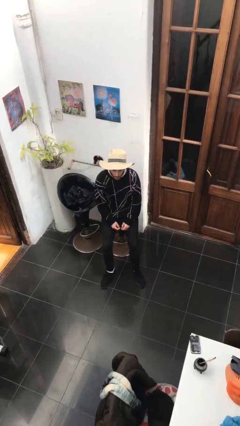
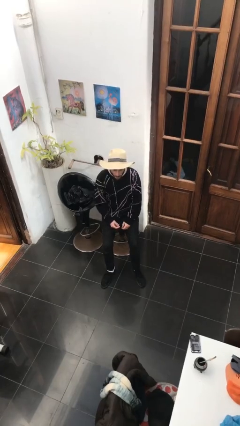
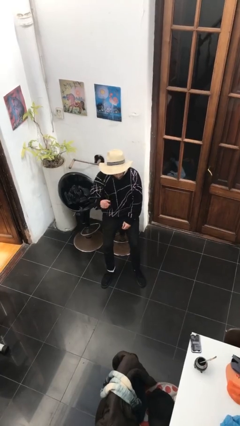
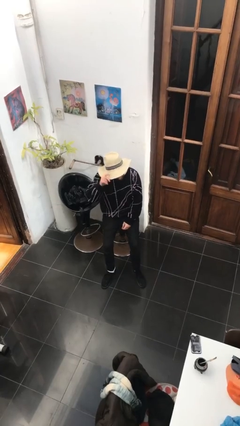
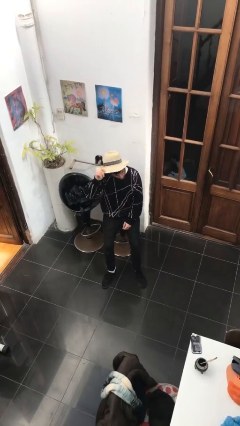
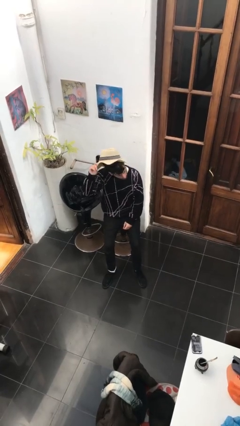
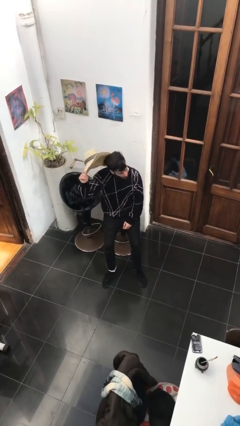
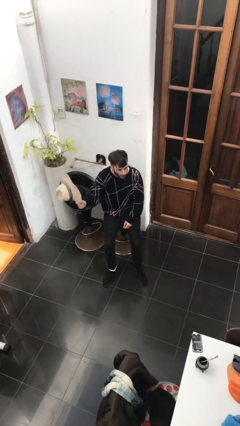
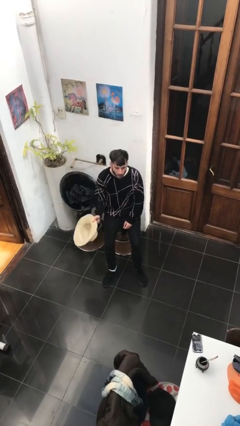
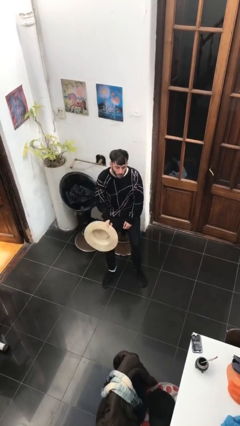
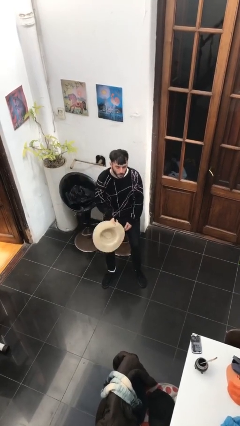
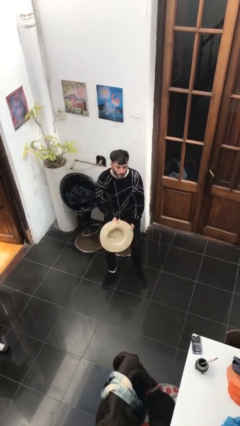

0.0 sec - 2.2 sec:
person takes off hat

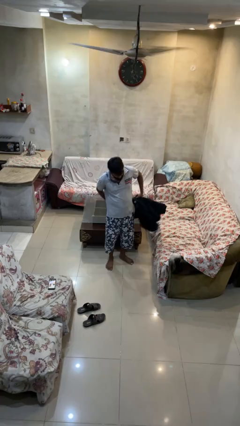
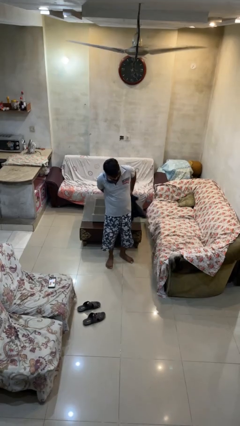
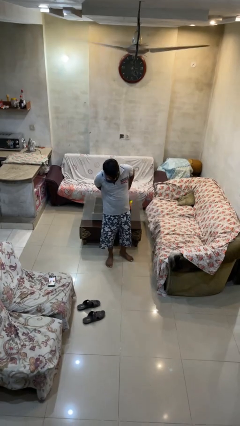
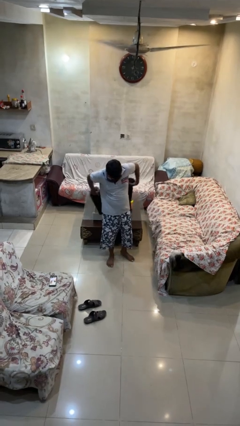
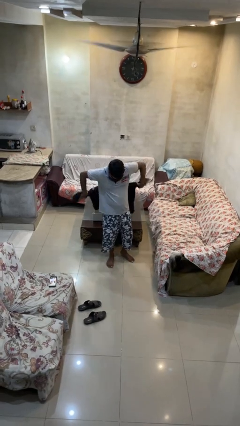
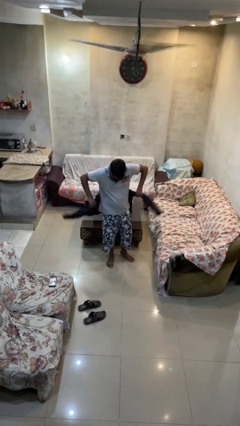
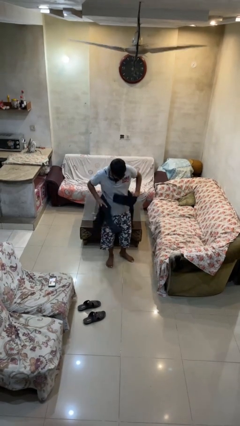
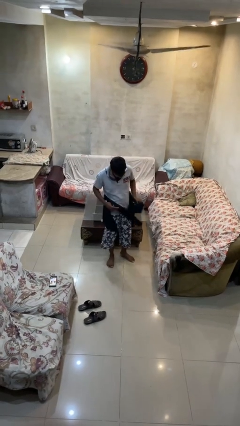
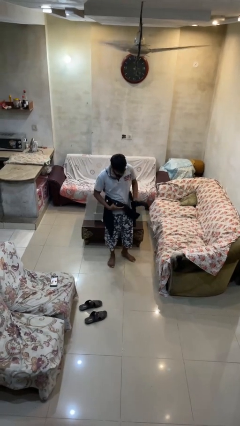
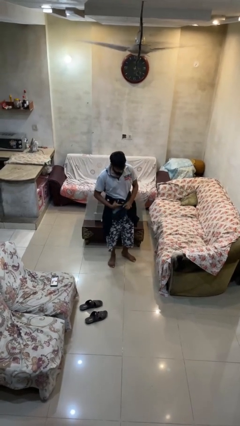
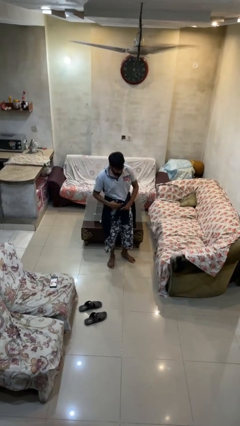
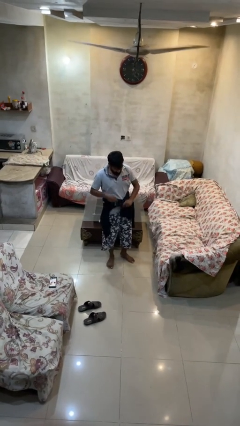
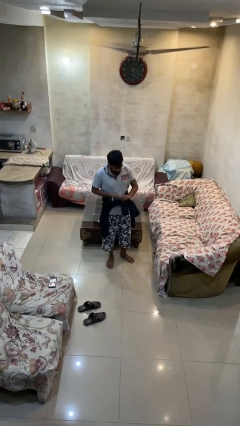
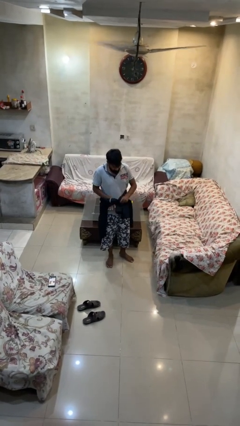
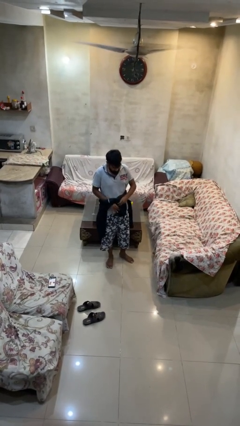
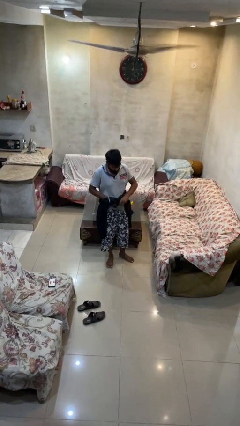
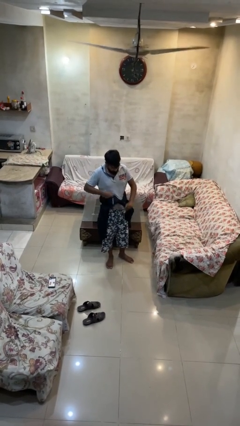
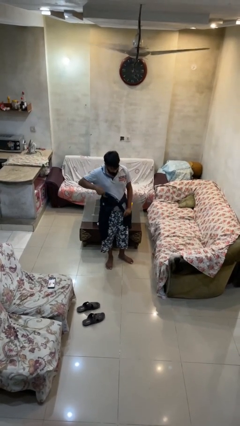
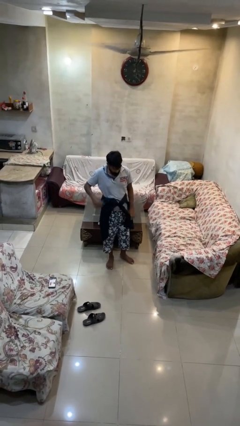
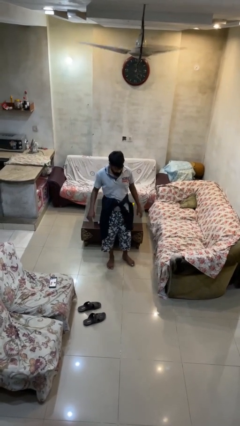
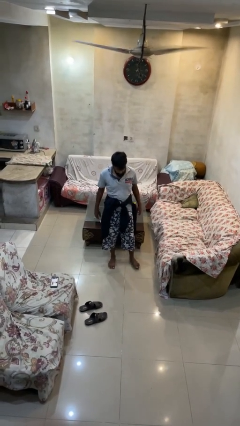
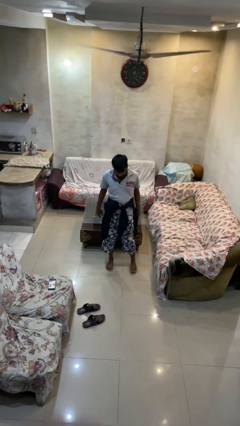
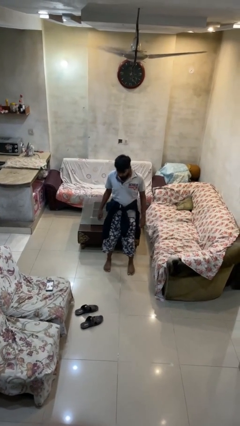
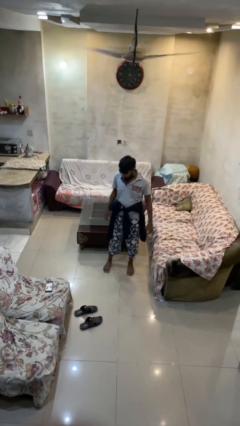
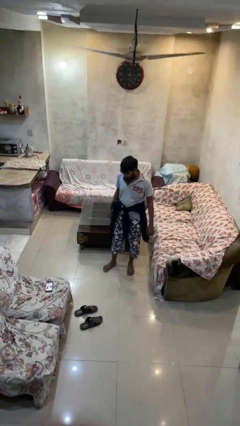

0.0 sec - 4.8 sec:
person ties jacket around waist

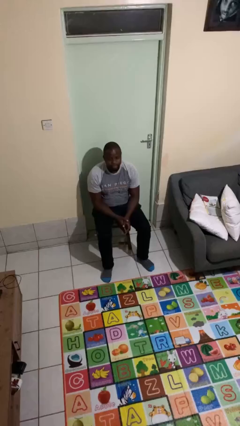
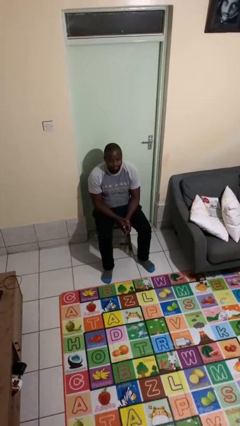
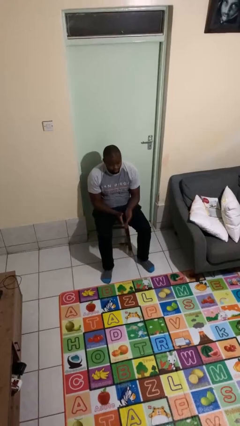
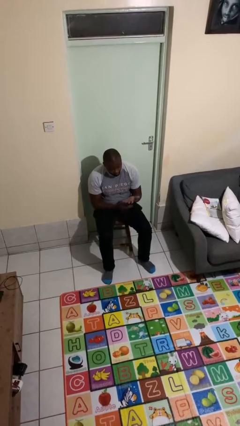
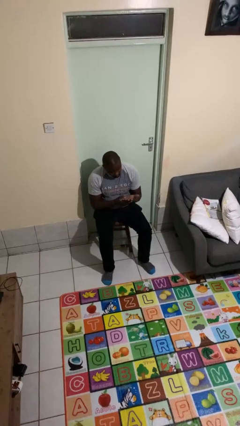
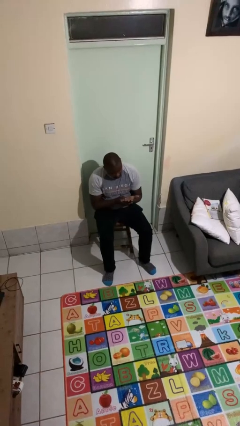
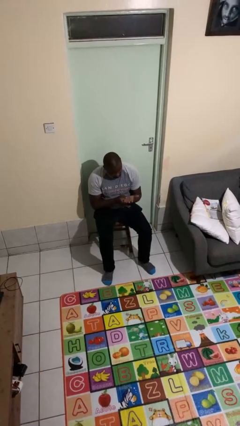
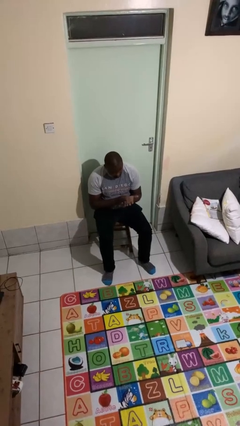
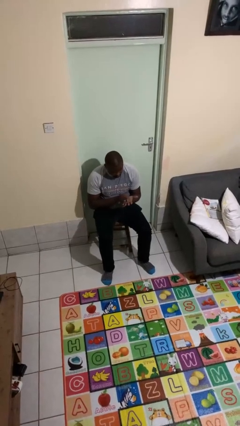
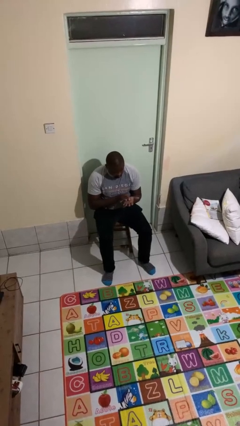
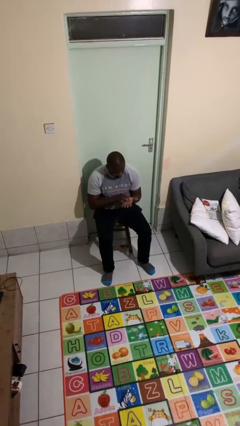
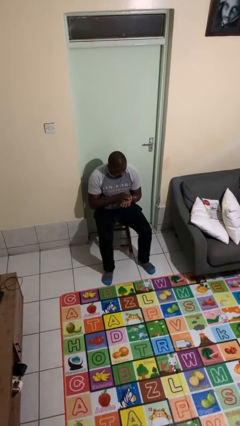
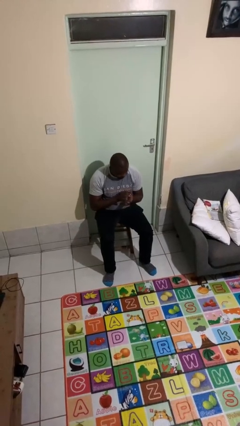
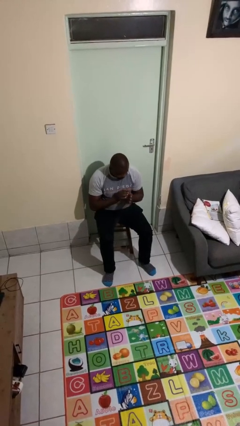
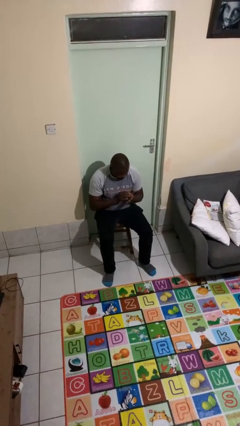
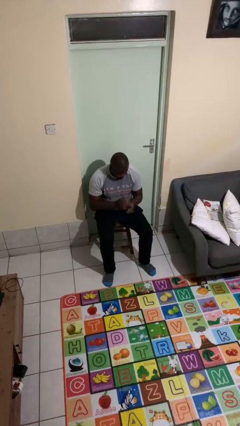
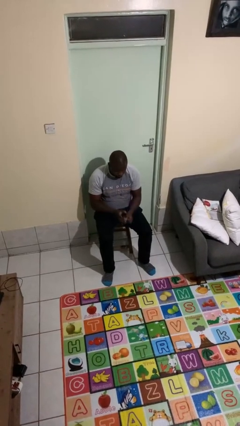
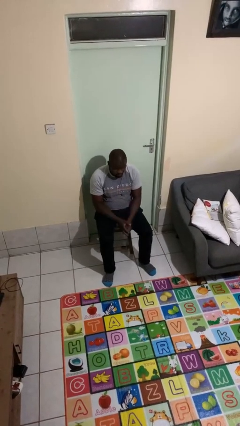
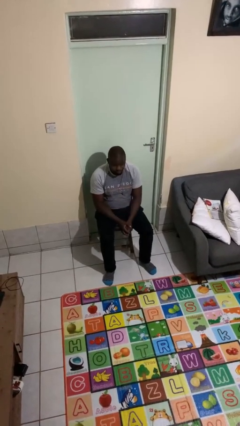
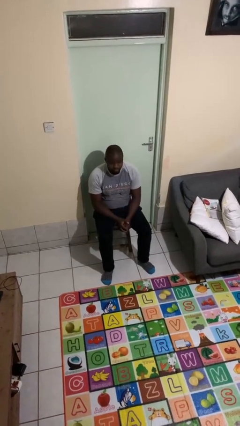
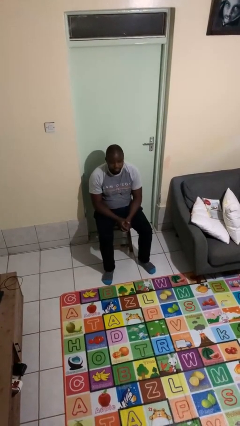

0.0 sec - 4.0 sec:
person looks at hands in lap

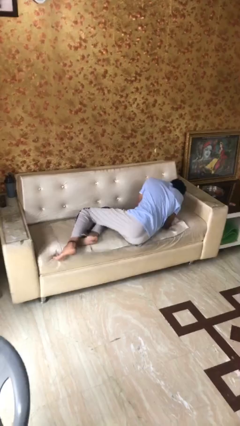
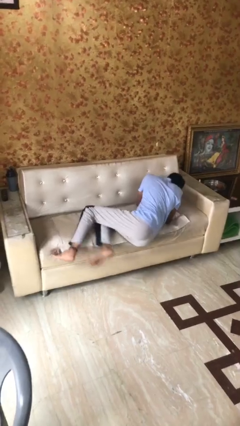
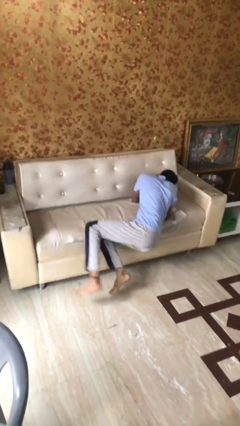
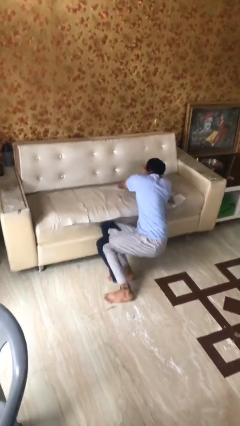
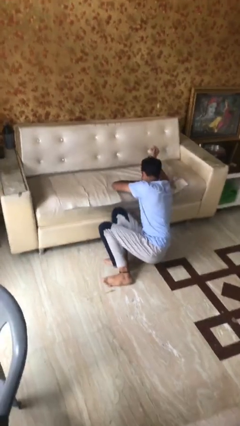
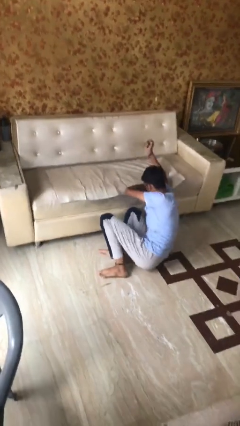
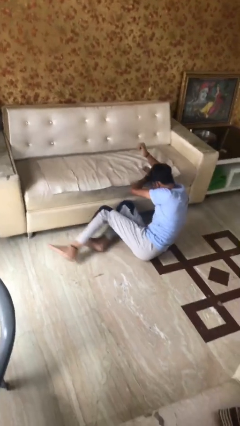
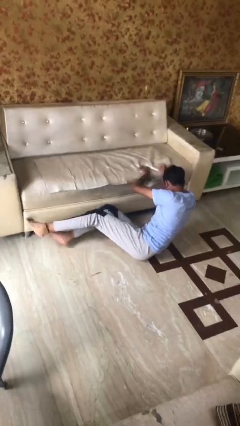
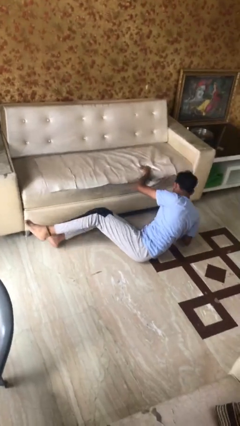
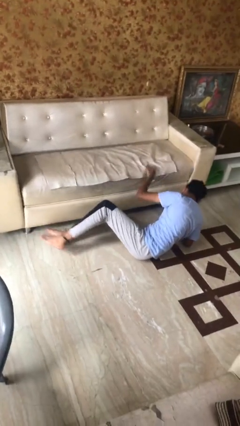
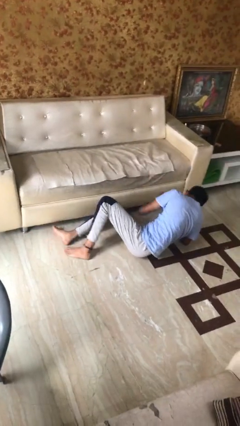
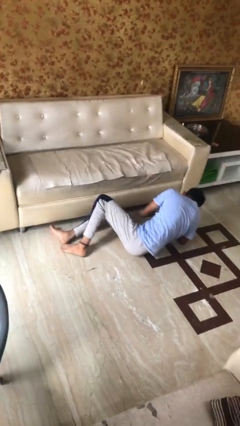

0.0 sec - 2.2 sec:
person falls from bed

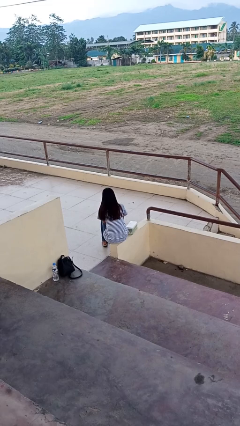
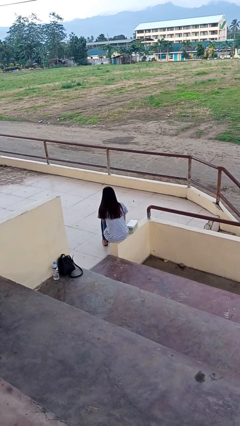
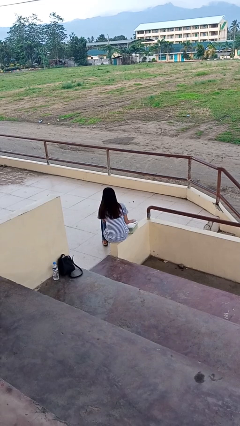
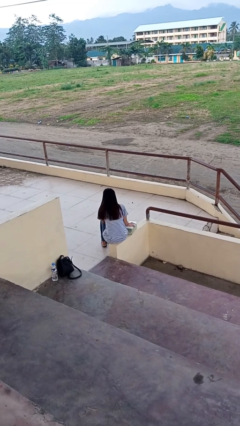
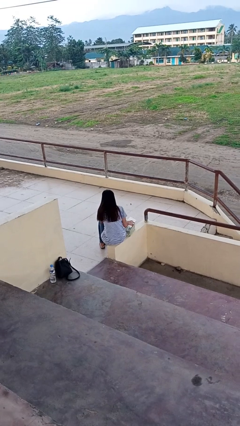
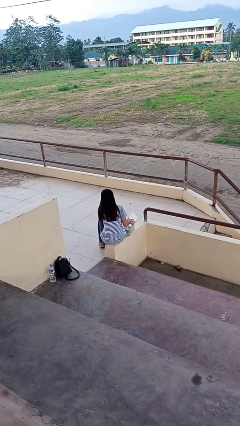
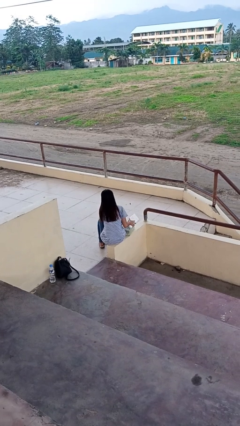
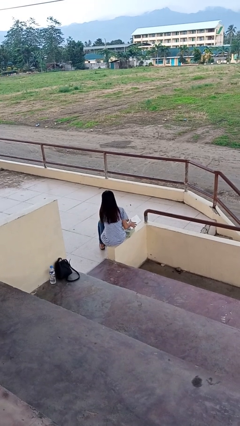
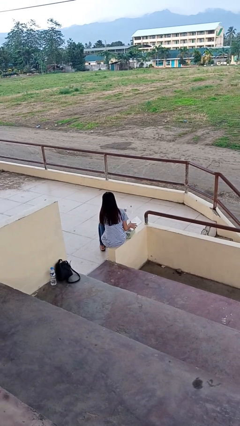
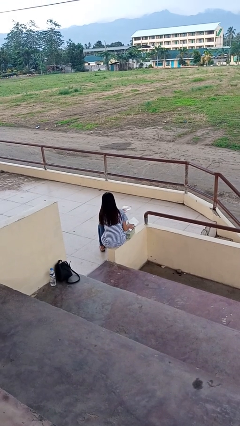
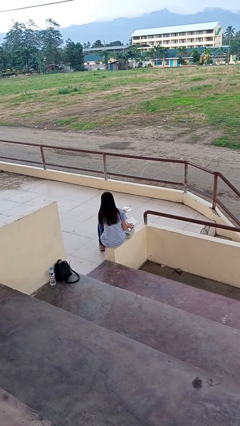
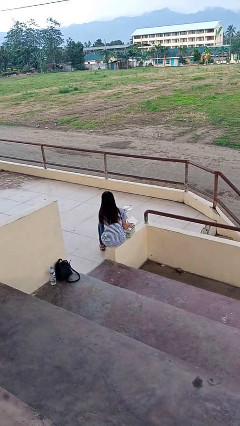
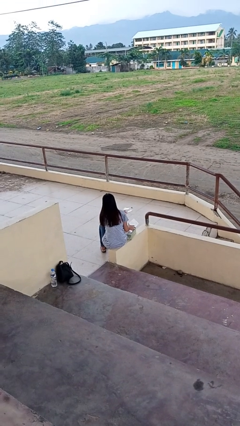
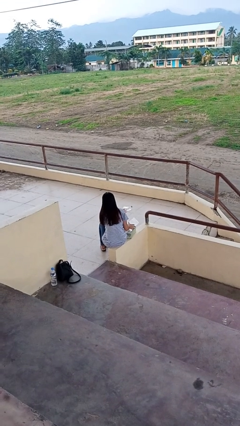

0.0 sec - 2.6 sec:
person takes object from box

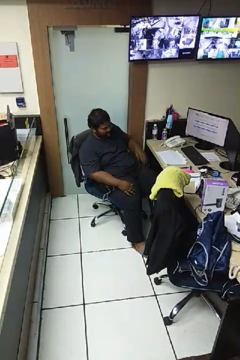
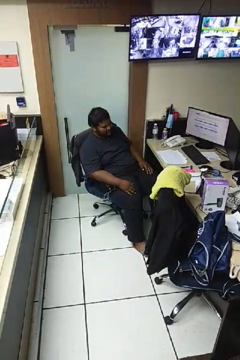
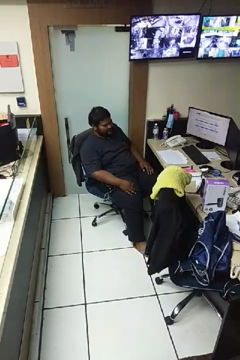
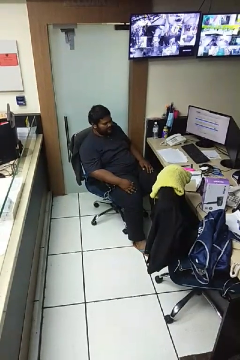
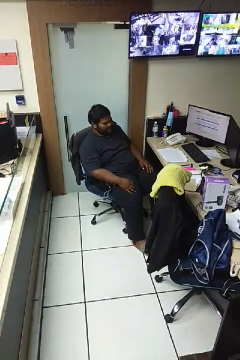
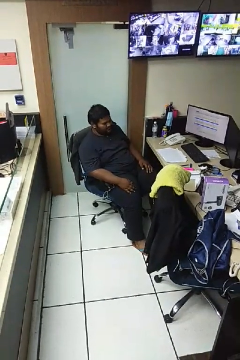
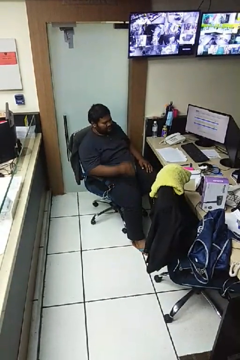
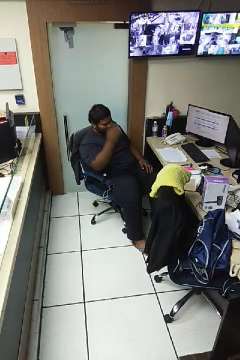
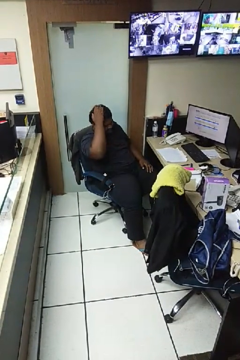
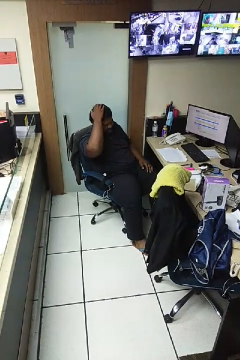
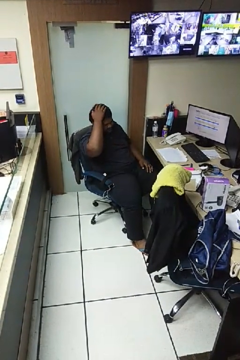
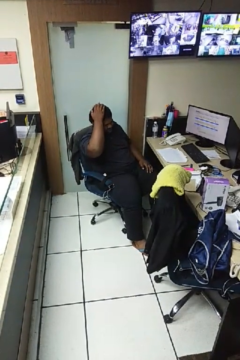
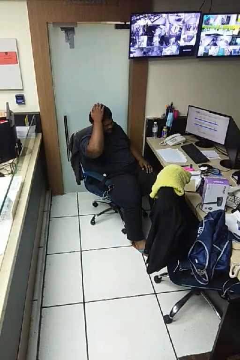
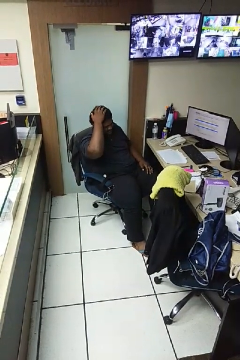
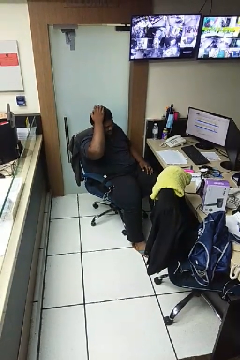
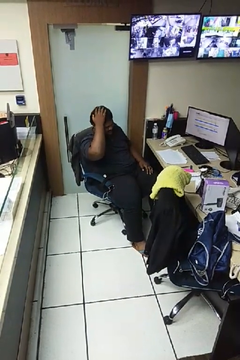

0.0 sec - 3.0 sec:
person pats head
